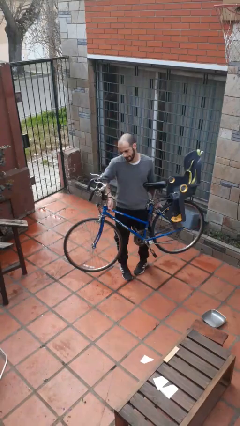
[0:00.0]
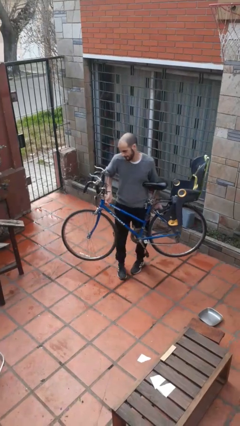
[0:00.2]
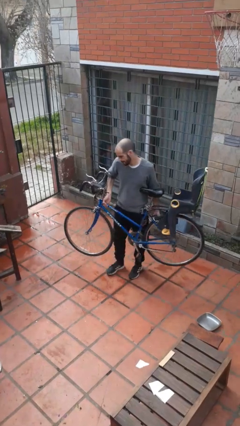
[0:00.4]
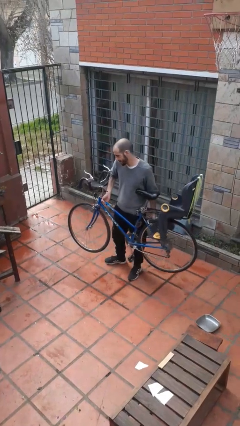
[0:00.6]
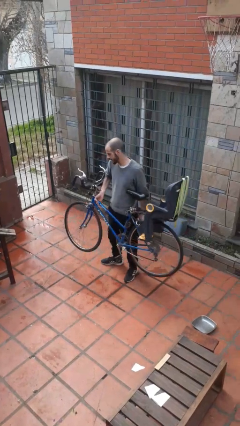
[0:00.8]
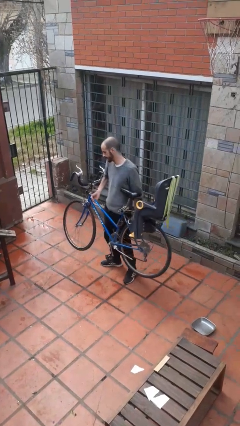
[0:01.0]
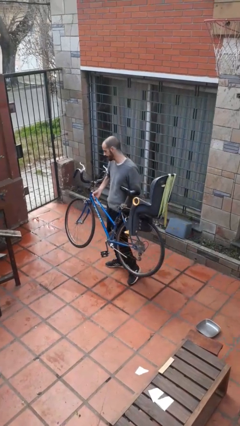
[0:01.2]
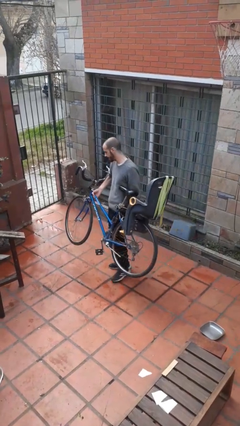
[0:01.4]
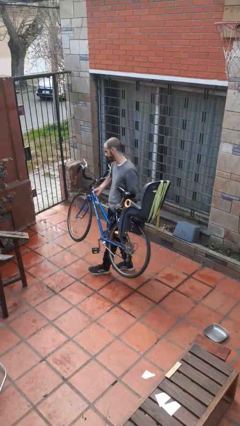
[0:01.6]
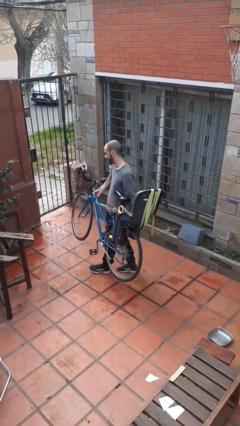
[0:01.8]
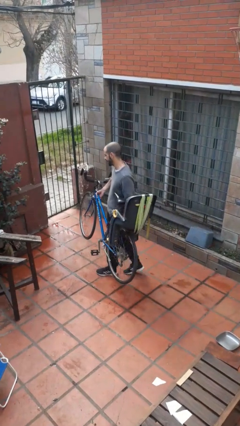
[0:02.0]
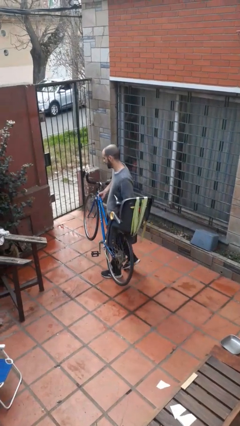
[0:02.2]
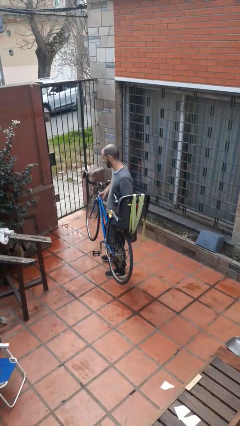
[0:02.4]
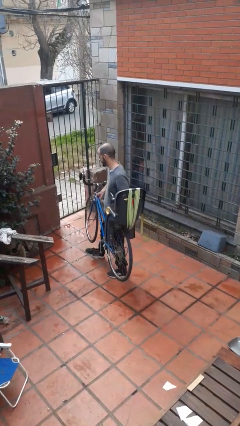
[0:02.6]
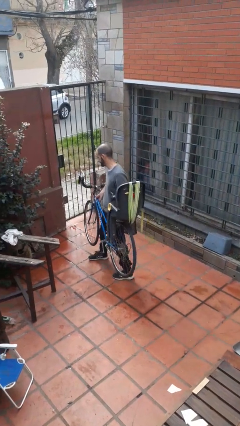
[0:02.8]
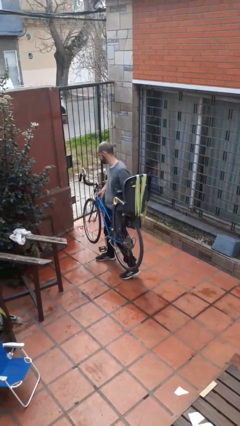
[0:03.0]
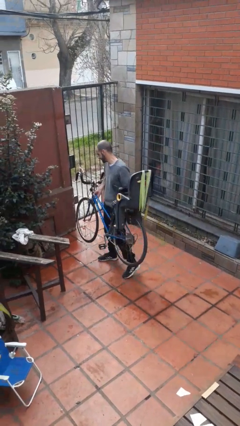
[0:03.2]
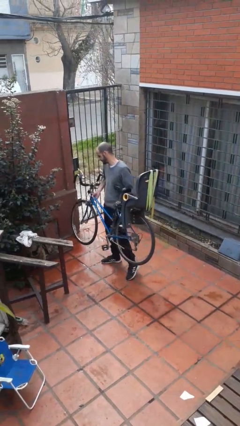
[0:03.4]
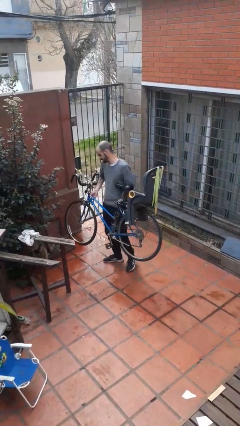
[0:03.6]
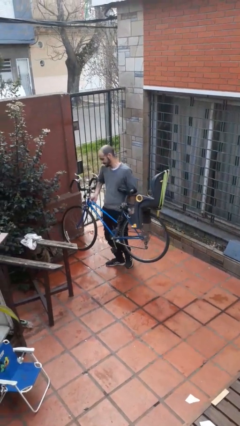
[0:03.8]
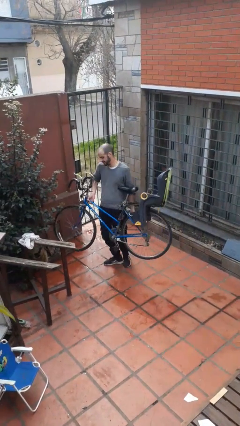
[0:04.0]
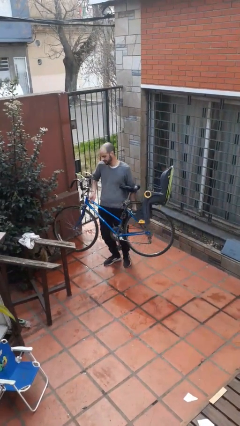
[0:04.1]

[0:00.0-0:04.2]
person carries bicycle

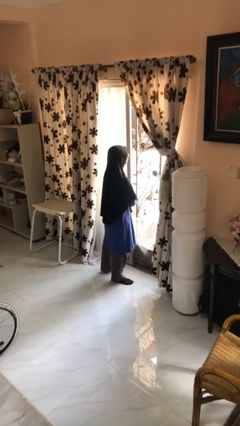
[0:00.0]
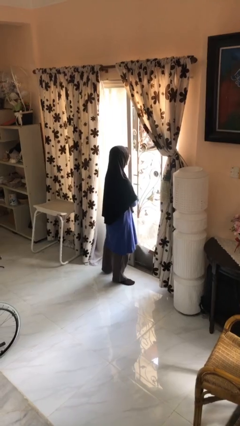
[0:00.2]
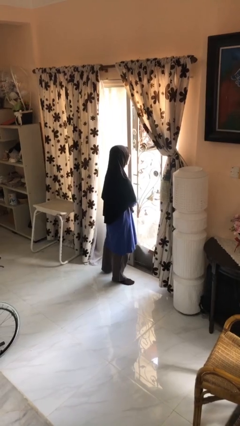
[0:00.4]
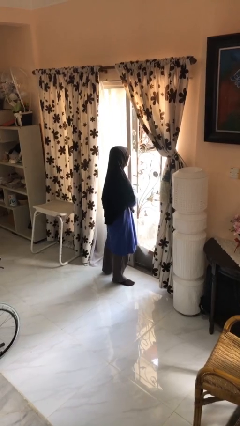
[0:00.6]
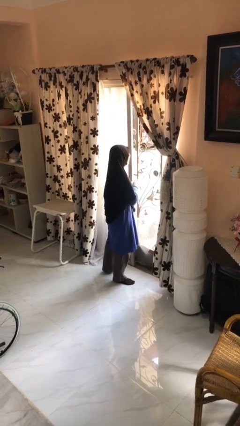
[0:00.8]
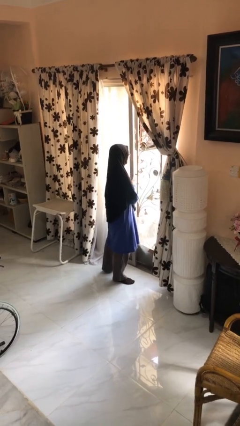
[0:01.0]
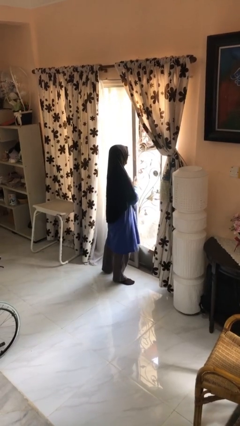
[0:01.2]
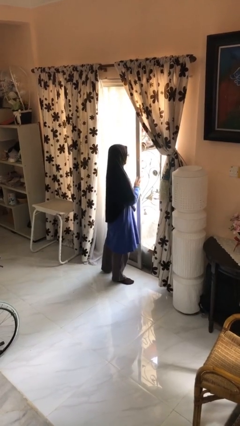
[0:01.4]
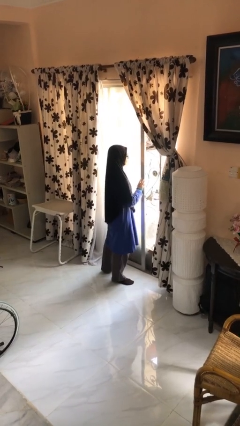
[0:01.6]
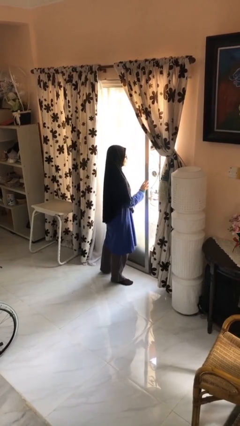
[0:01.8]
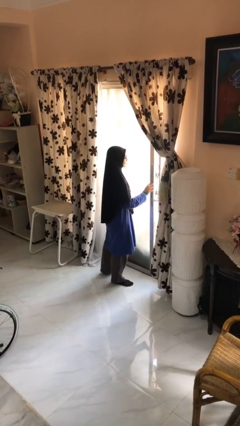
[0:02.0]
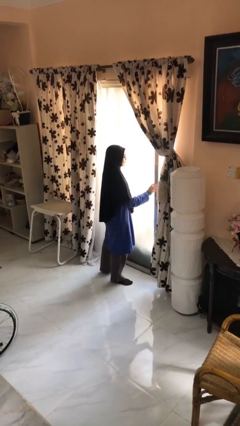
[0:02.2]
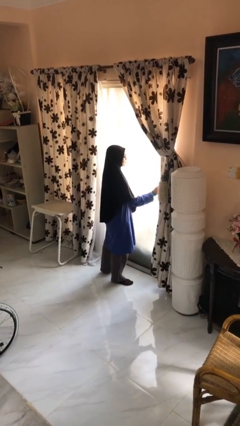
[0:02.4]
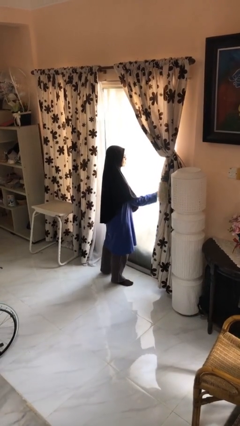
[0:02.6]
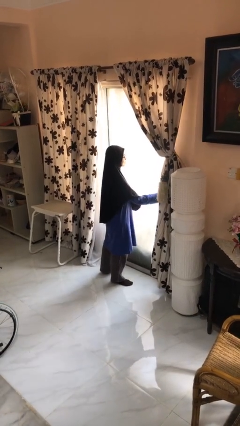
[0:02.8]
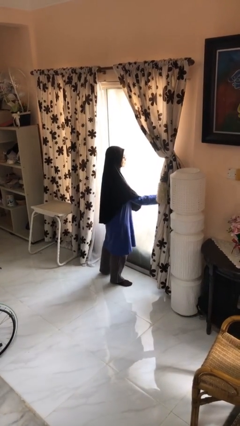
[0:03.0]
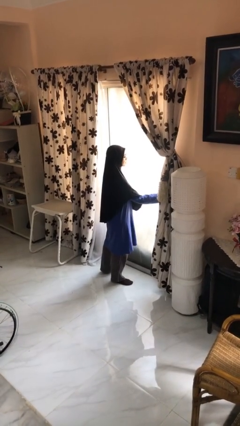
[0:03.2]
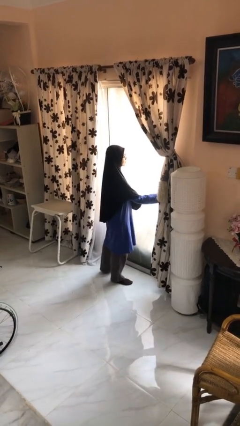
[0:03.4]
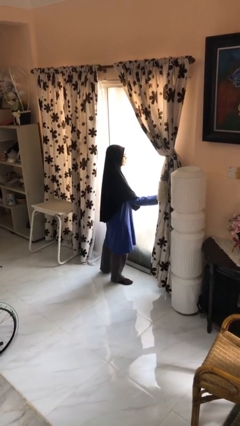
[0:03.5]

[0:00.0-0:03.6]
person closes sliding door

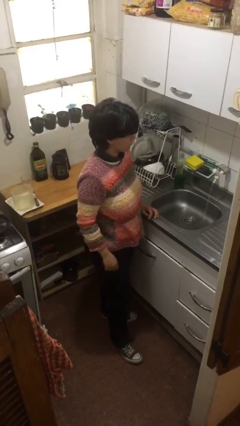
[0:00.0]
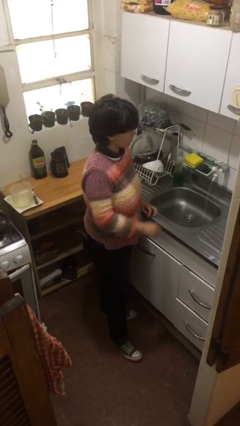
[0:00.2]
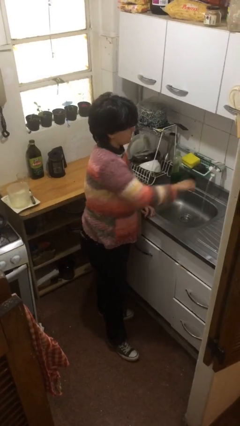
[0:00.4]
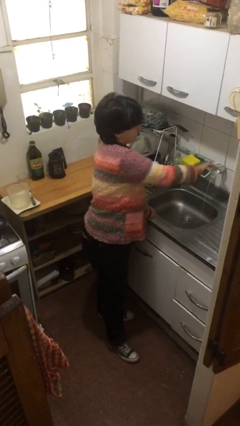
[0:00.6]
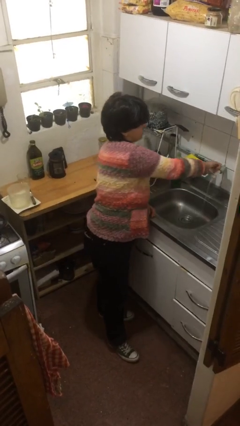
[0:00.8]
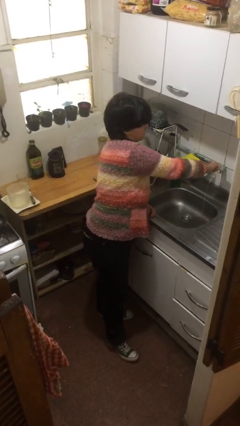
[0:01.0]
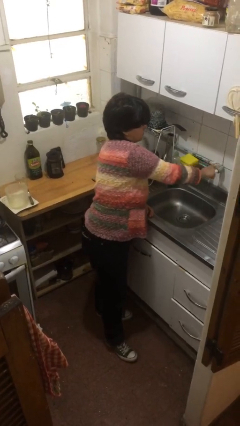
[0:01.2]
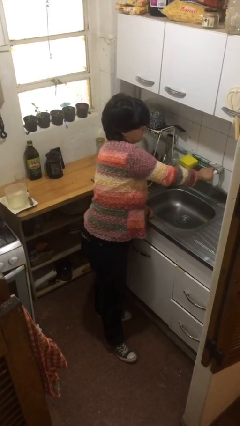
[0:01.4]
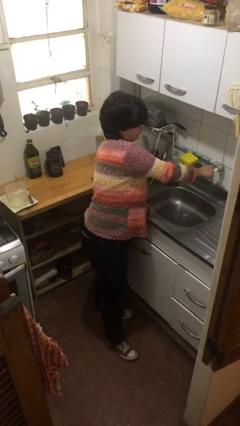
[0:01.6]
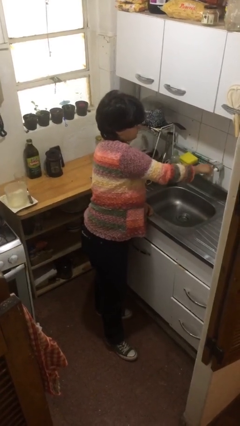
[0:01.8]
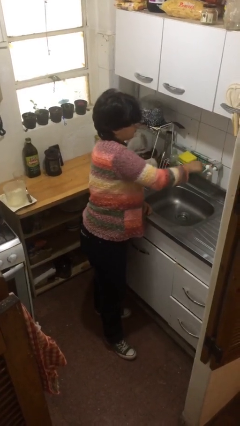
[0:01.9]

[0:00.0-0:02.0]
person turns off faucet

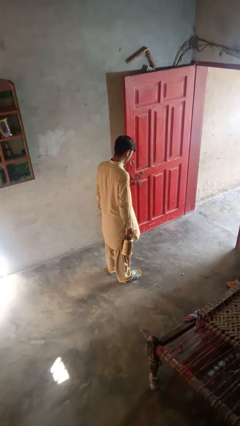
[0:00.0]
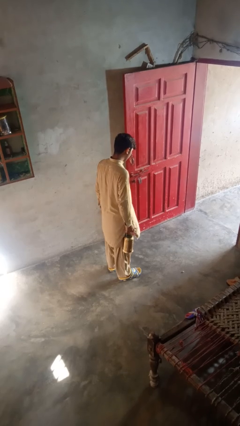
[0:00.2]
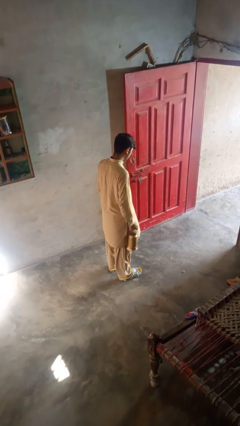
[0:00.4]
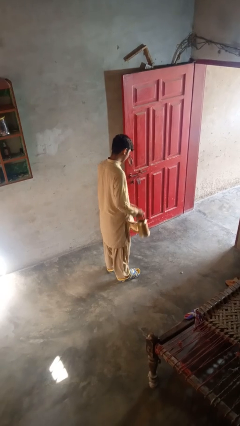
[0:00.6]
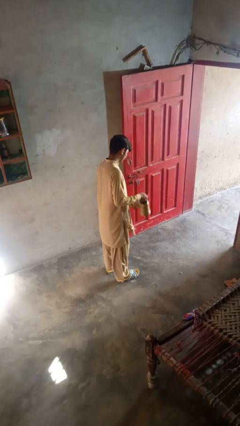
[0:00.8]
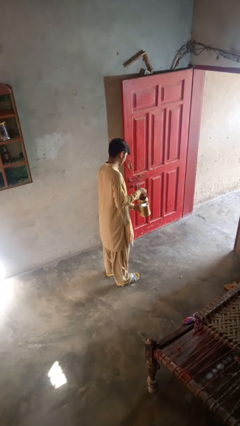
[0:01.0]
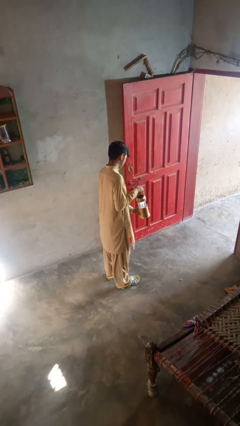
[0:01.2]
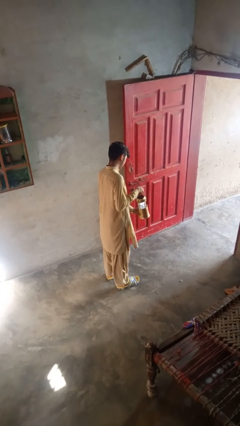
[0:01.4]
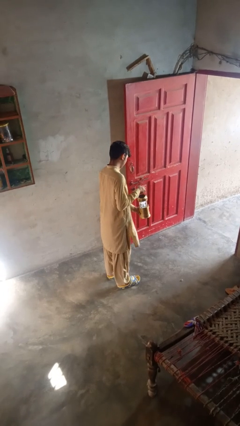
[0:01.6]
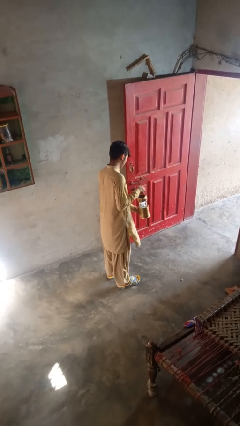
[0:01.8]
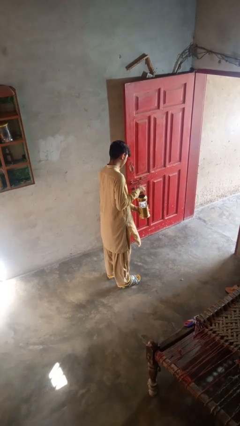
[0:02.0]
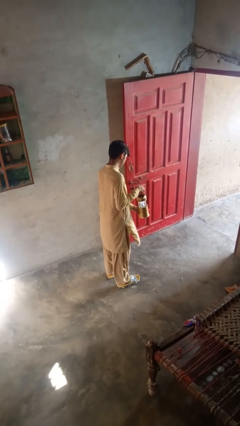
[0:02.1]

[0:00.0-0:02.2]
person turns on lamp

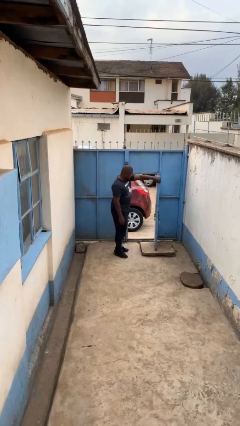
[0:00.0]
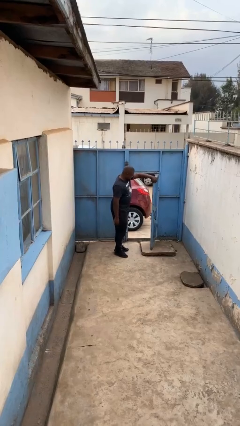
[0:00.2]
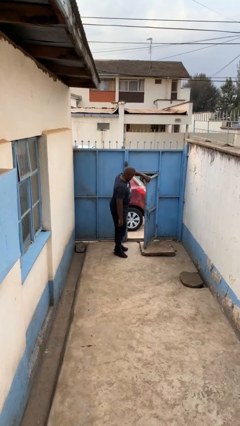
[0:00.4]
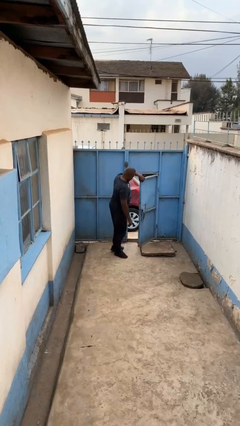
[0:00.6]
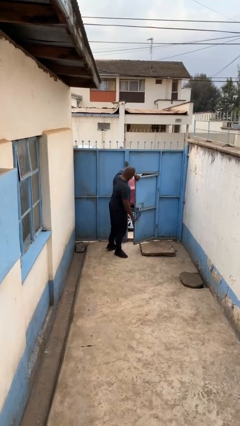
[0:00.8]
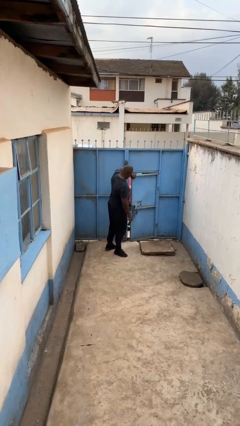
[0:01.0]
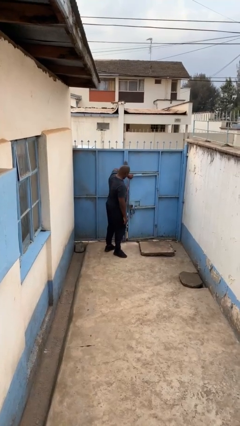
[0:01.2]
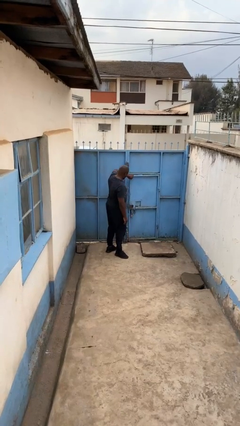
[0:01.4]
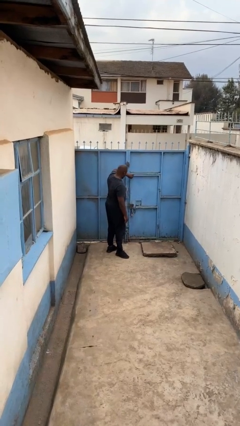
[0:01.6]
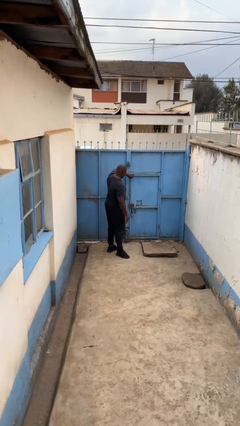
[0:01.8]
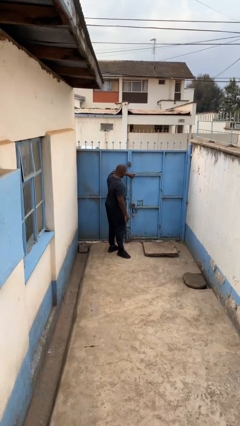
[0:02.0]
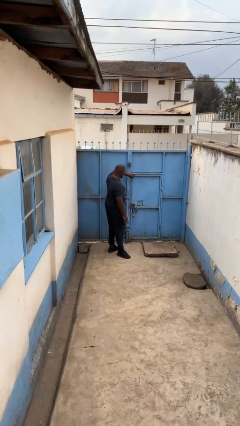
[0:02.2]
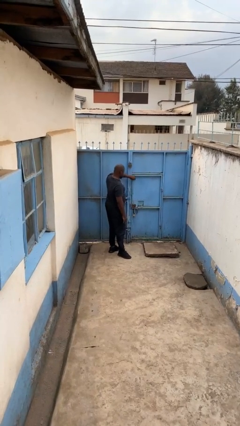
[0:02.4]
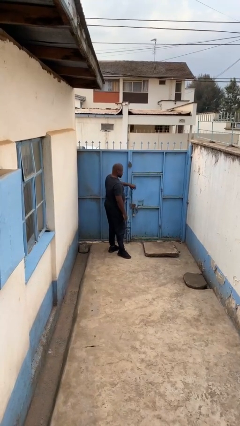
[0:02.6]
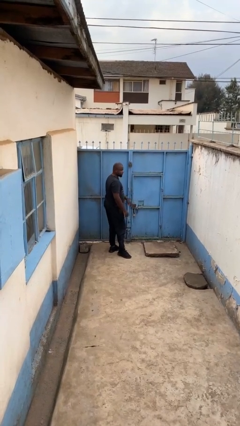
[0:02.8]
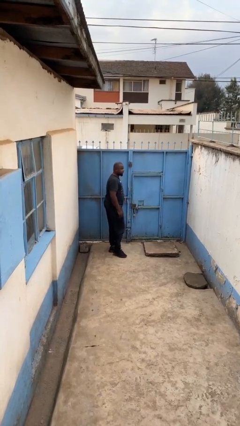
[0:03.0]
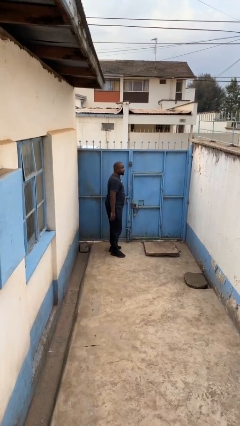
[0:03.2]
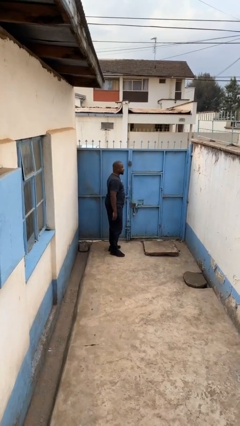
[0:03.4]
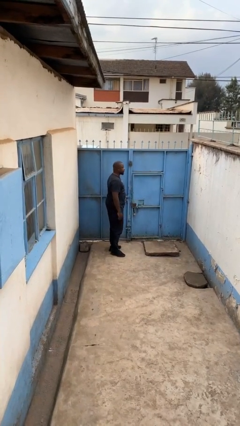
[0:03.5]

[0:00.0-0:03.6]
person closes gate

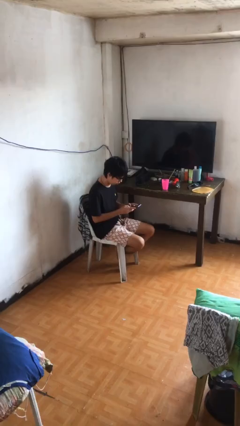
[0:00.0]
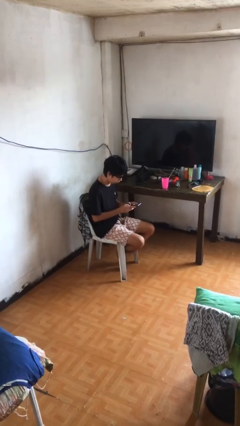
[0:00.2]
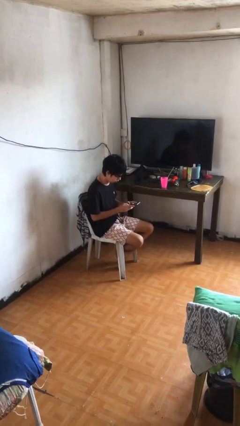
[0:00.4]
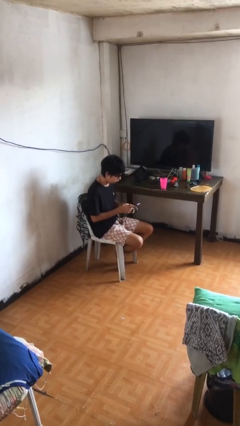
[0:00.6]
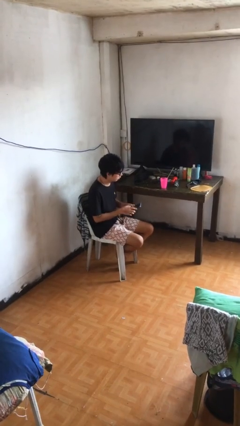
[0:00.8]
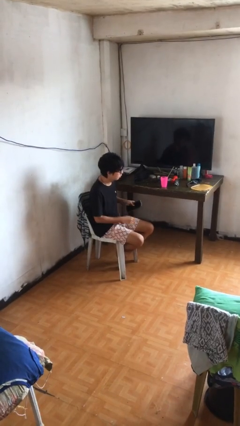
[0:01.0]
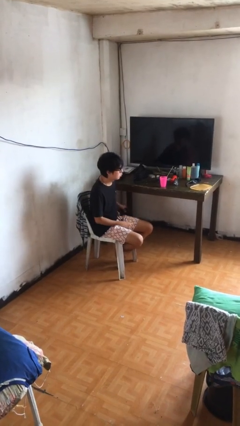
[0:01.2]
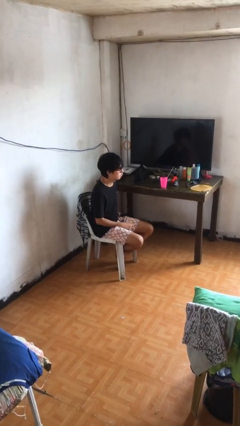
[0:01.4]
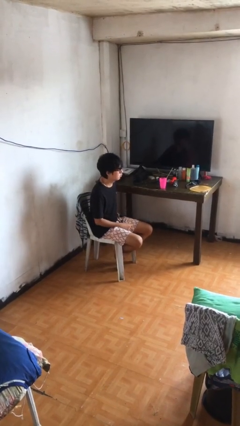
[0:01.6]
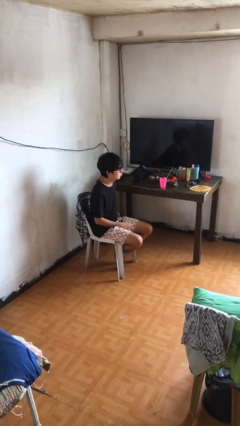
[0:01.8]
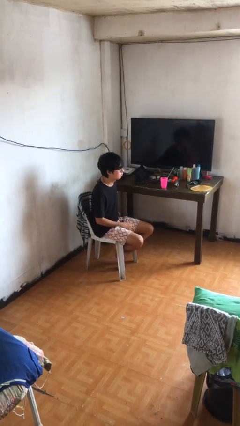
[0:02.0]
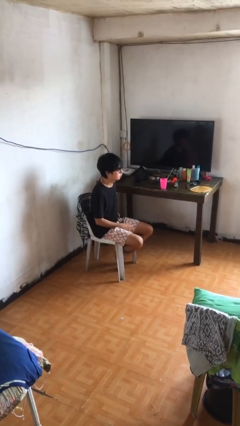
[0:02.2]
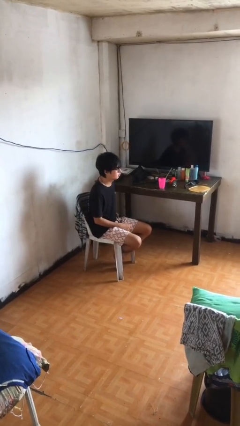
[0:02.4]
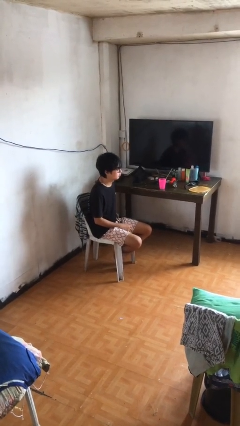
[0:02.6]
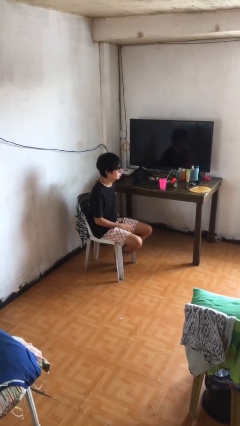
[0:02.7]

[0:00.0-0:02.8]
person puts phone into pocket
